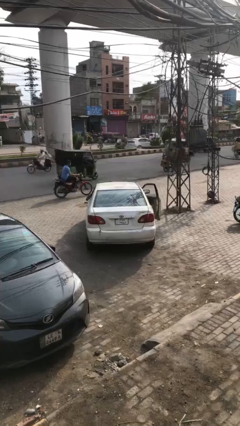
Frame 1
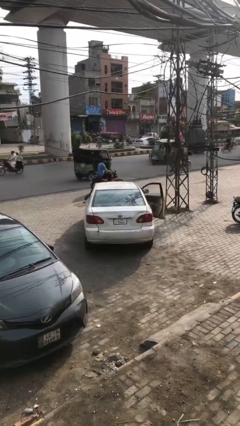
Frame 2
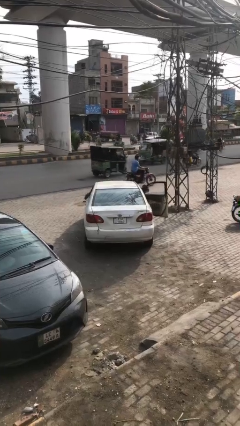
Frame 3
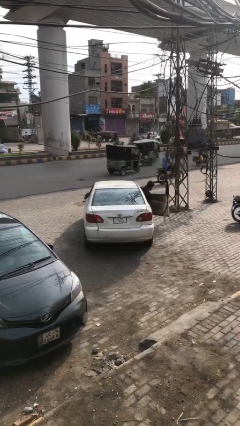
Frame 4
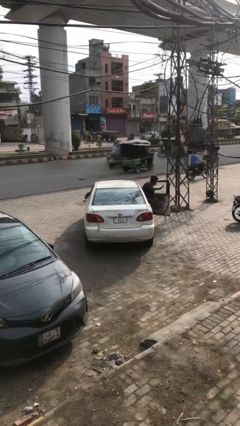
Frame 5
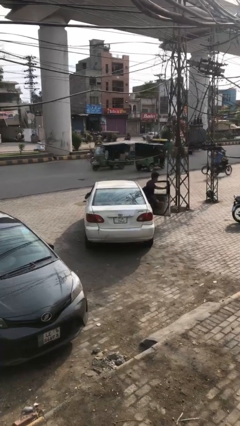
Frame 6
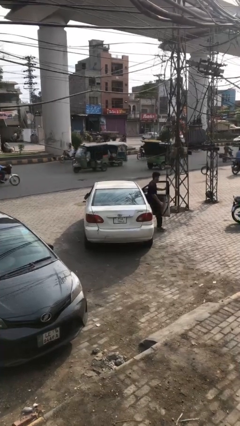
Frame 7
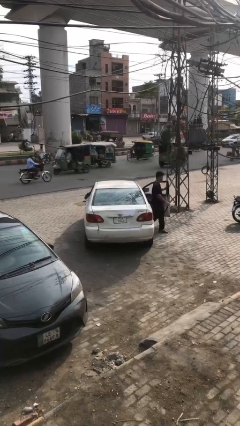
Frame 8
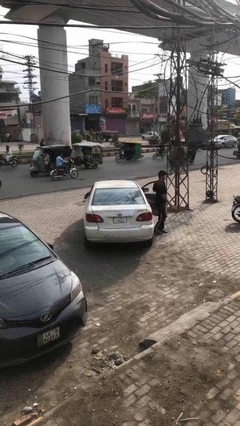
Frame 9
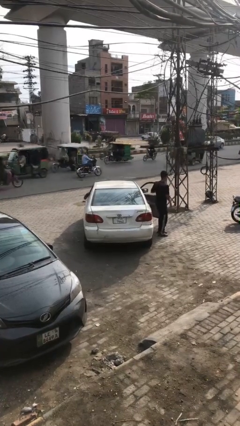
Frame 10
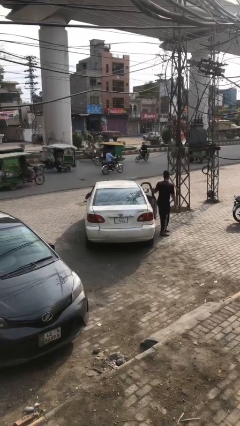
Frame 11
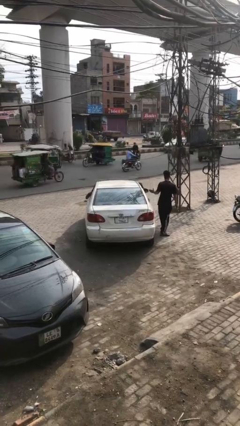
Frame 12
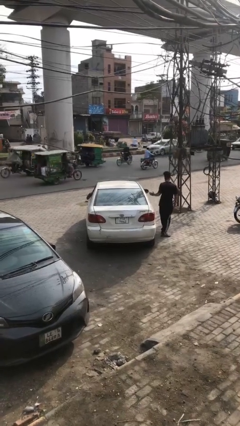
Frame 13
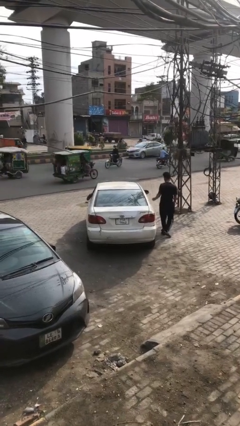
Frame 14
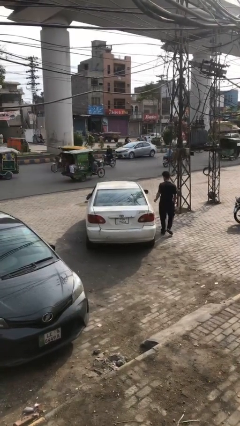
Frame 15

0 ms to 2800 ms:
car drops off person

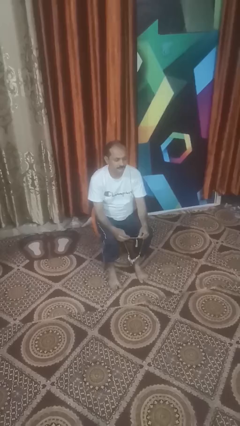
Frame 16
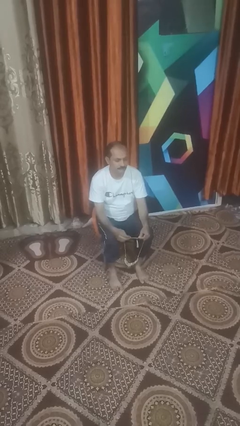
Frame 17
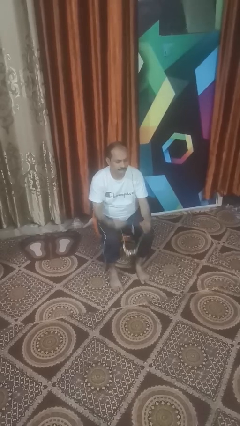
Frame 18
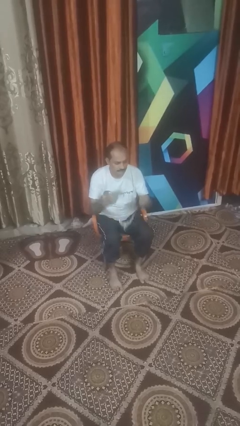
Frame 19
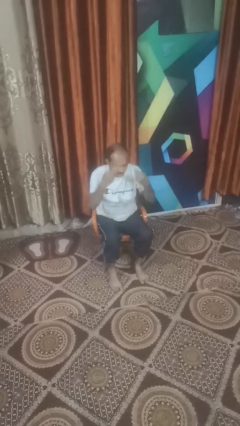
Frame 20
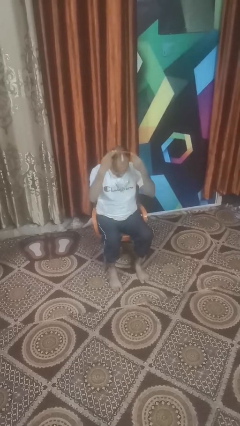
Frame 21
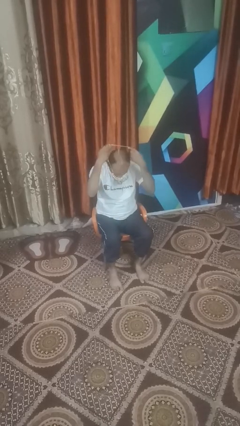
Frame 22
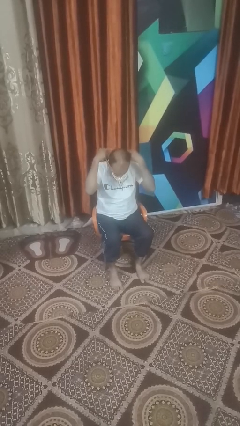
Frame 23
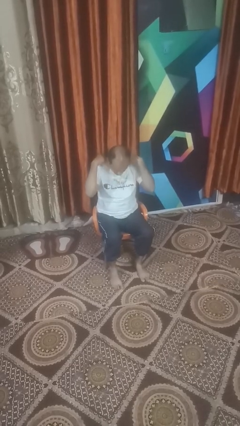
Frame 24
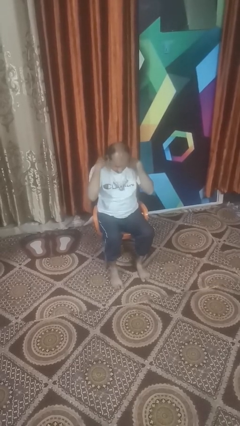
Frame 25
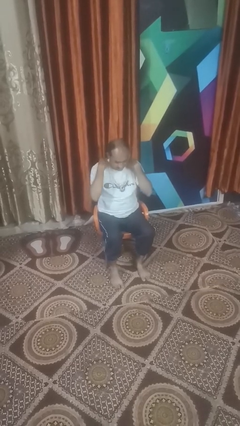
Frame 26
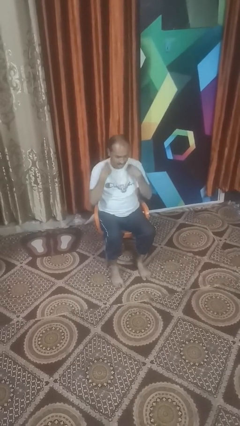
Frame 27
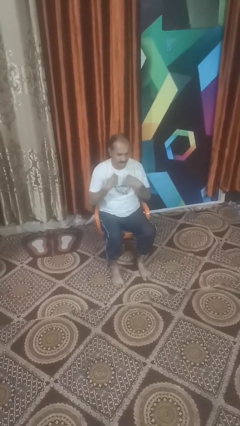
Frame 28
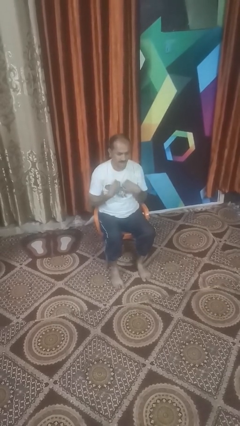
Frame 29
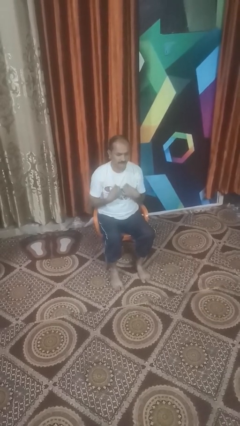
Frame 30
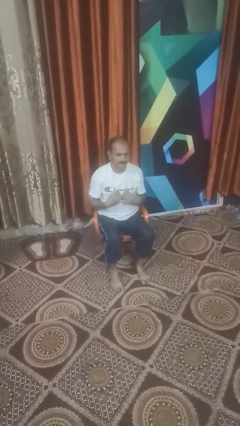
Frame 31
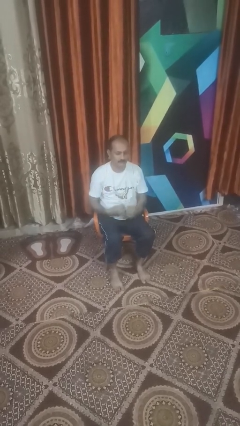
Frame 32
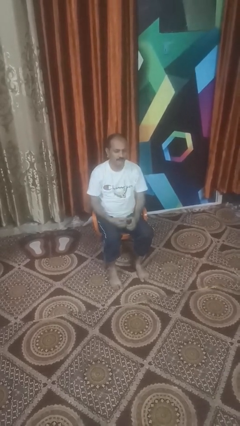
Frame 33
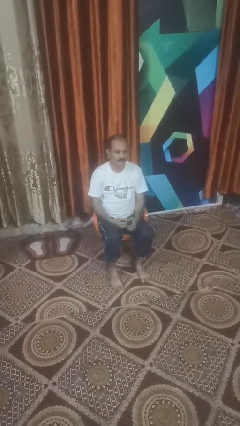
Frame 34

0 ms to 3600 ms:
person puts on necklace

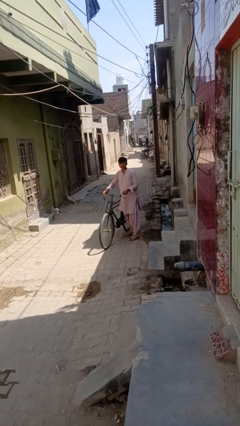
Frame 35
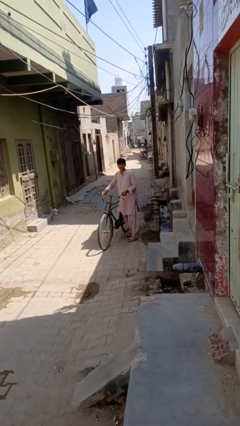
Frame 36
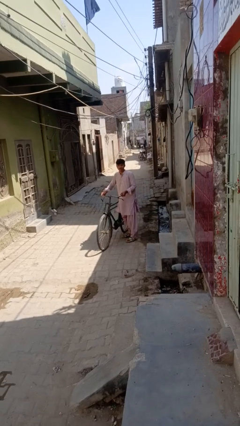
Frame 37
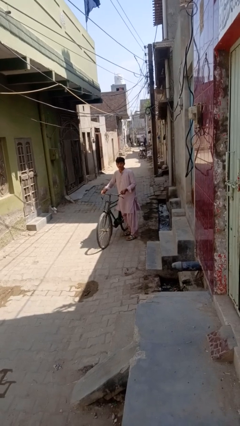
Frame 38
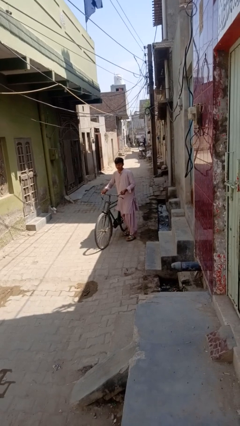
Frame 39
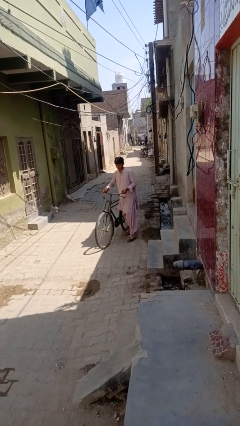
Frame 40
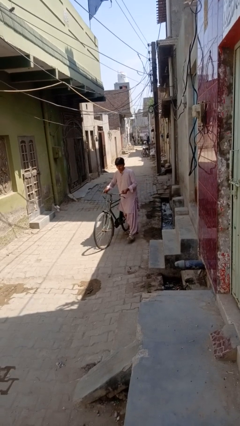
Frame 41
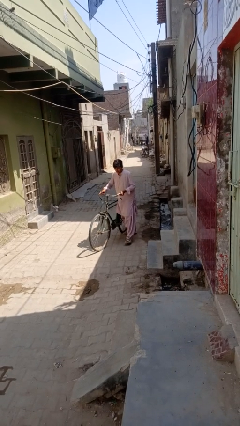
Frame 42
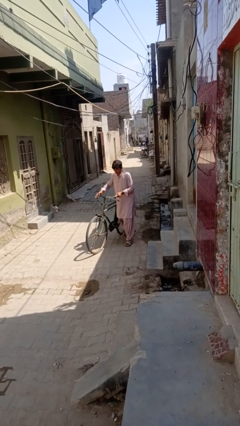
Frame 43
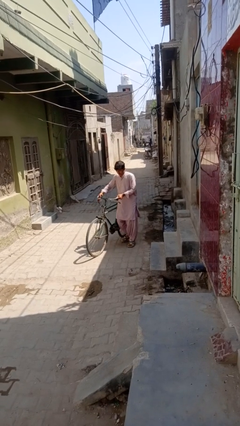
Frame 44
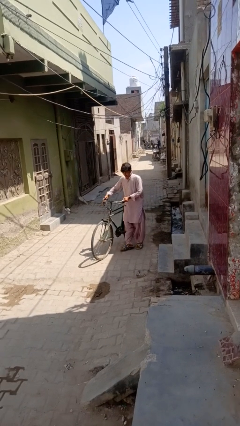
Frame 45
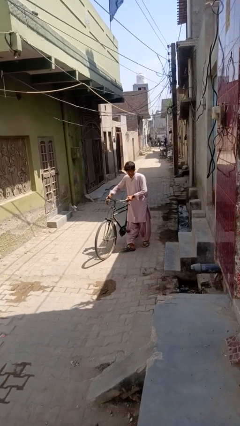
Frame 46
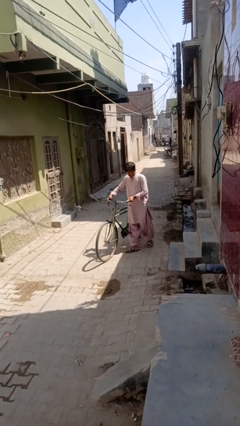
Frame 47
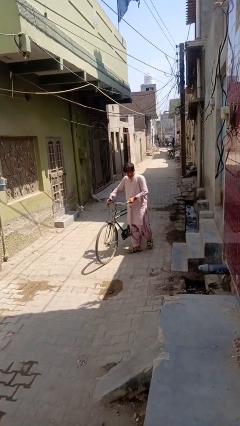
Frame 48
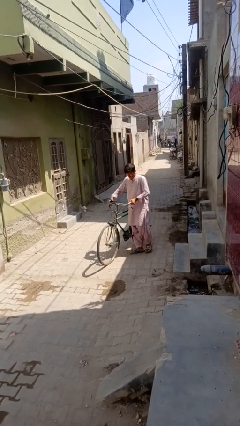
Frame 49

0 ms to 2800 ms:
person carries bicycle

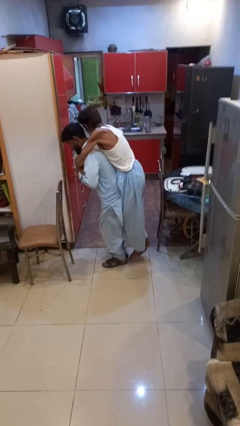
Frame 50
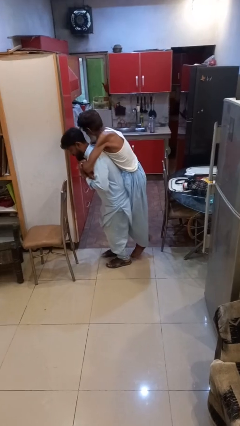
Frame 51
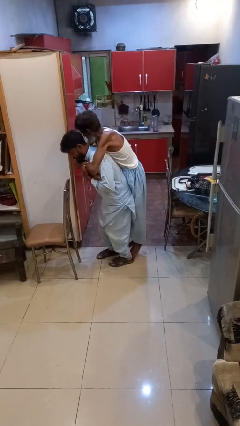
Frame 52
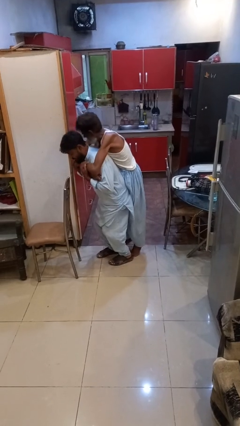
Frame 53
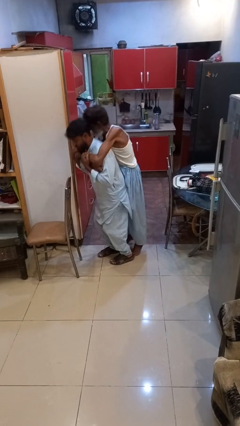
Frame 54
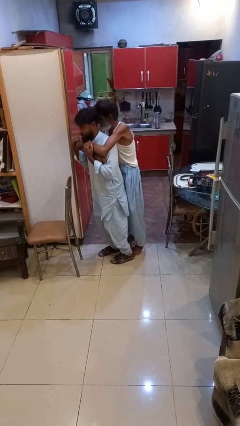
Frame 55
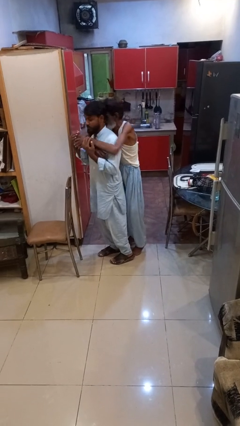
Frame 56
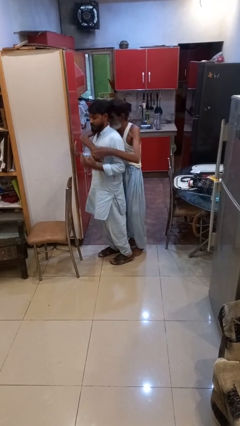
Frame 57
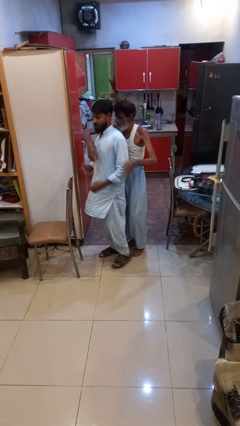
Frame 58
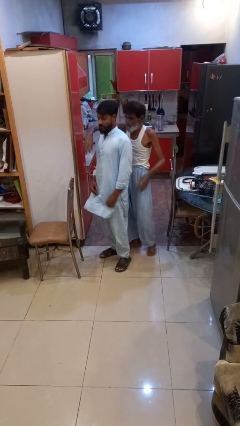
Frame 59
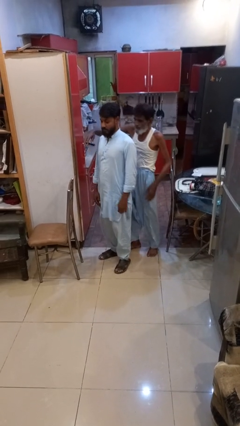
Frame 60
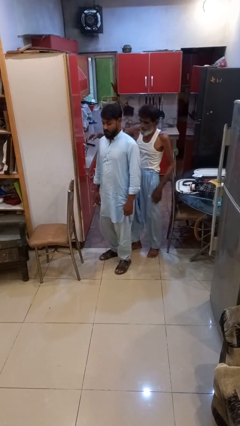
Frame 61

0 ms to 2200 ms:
person puts down person

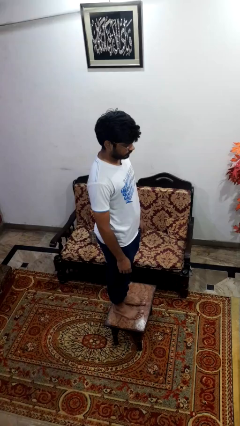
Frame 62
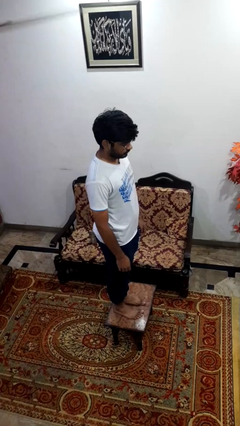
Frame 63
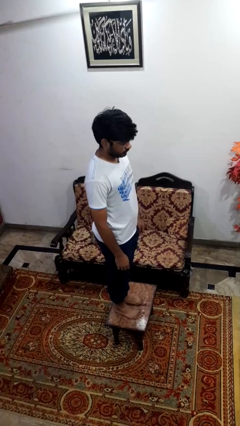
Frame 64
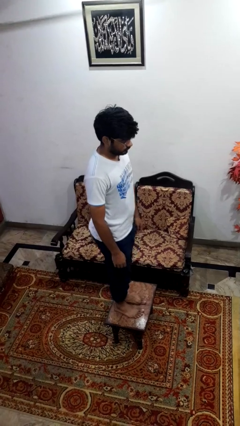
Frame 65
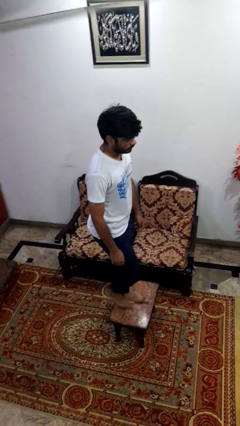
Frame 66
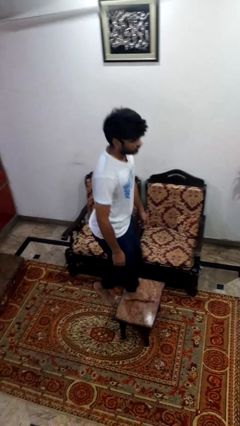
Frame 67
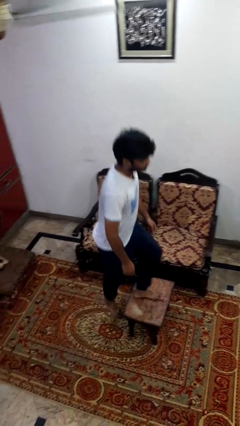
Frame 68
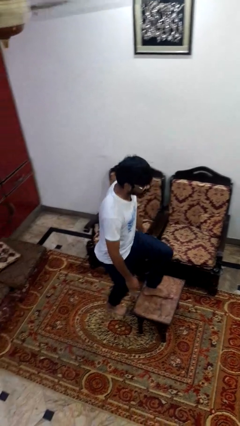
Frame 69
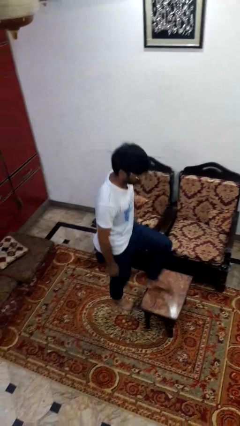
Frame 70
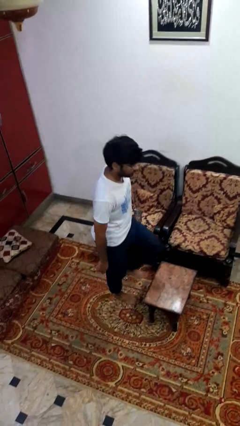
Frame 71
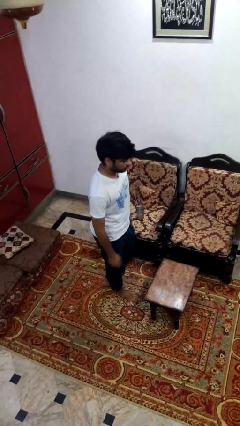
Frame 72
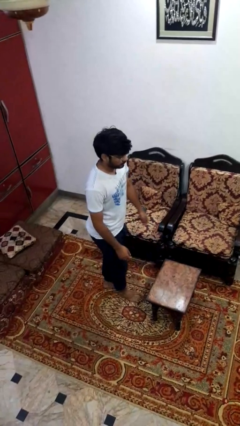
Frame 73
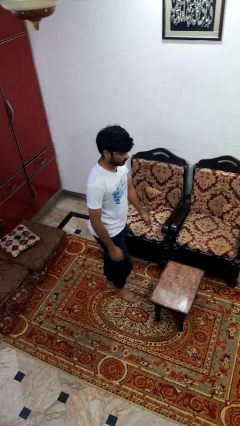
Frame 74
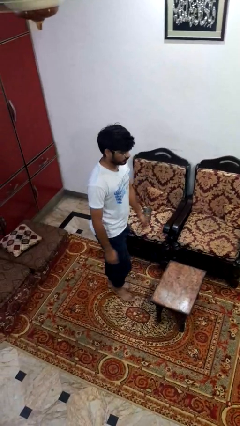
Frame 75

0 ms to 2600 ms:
person climbs off table

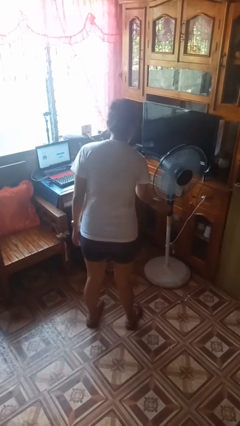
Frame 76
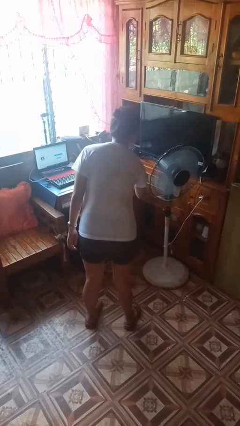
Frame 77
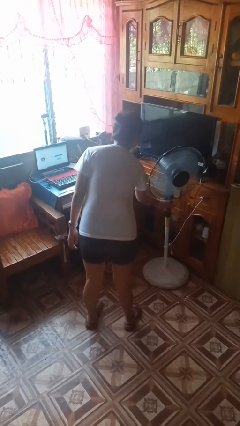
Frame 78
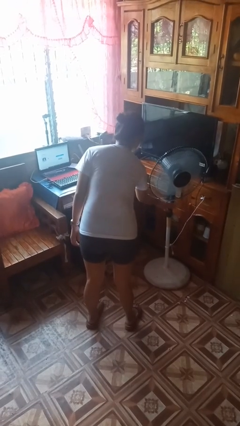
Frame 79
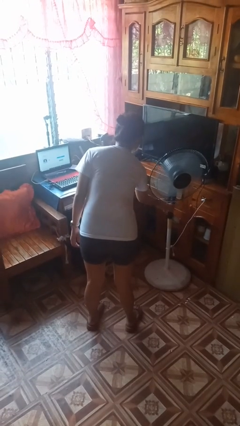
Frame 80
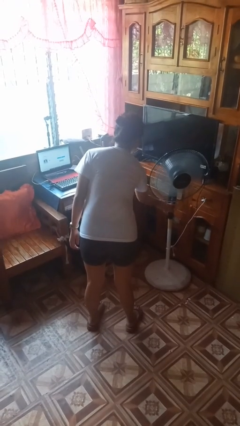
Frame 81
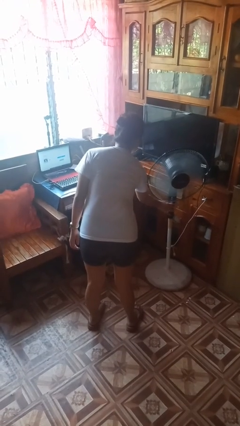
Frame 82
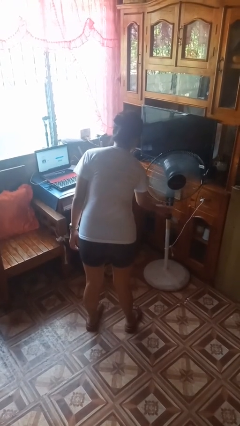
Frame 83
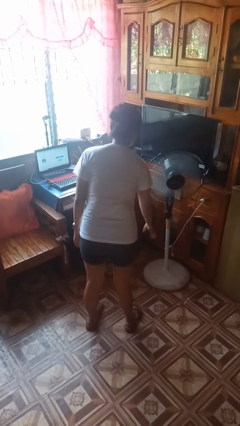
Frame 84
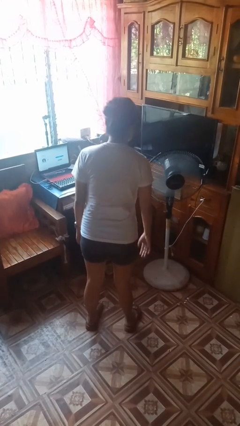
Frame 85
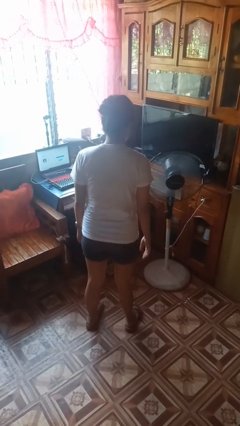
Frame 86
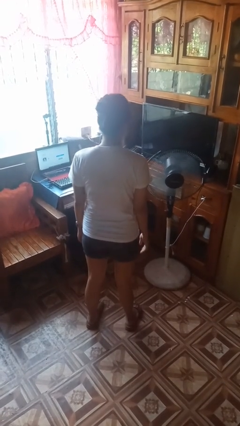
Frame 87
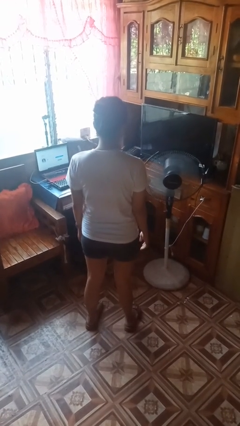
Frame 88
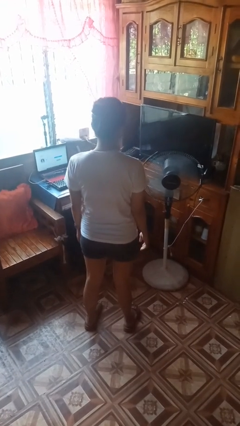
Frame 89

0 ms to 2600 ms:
person turns off fan

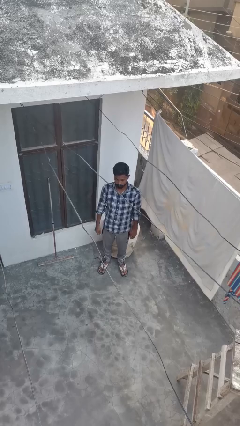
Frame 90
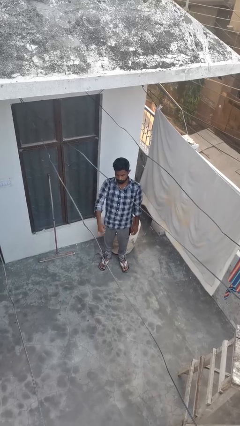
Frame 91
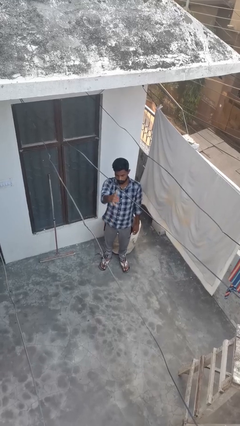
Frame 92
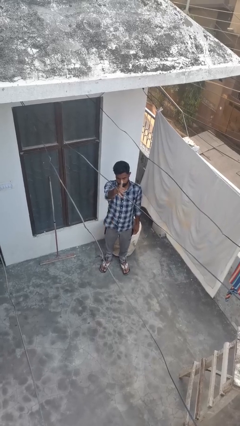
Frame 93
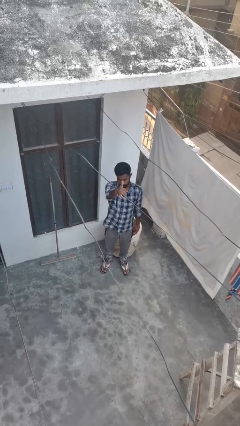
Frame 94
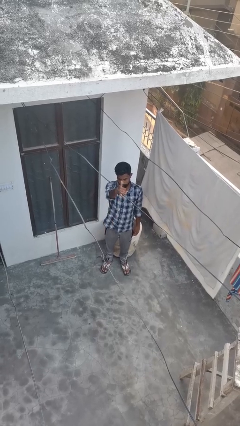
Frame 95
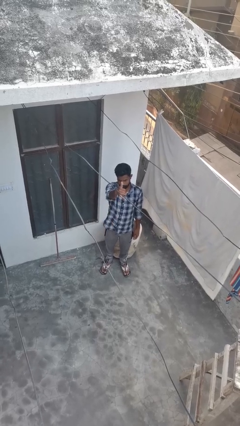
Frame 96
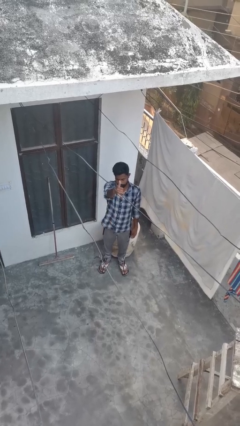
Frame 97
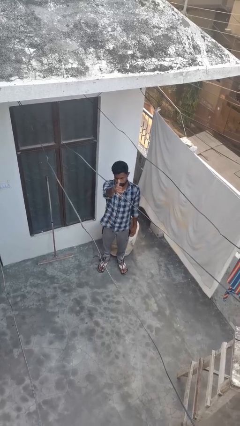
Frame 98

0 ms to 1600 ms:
person gestures hang loose
